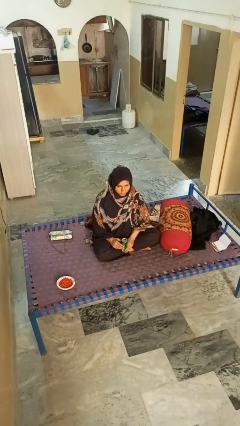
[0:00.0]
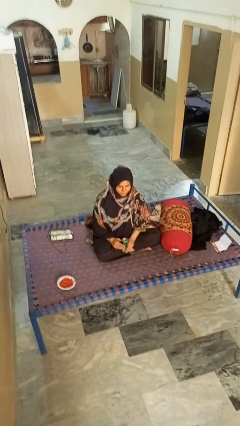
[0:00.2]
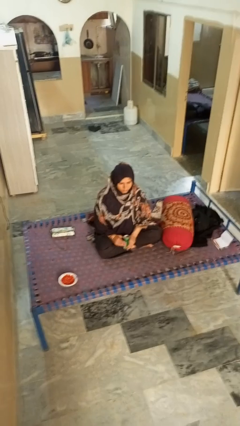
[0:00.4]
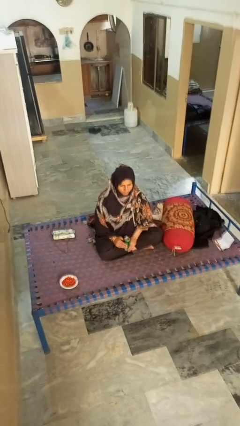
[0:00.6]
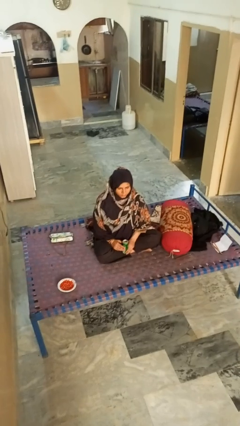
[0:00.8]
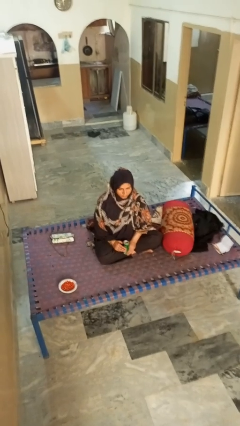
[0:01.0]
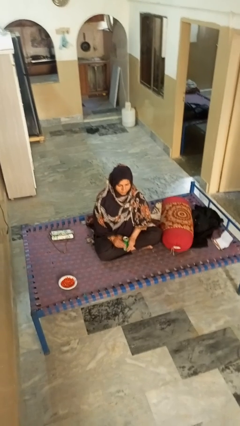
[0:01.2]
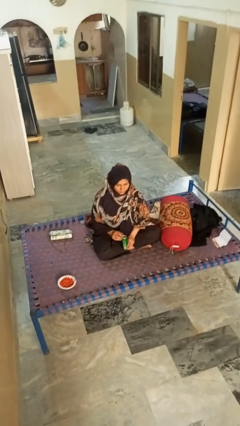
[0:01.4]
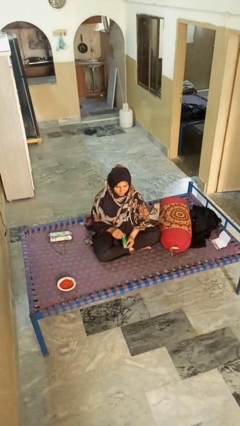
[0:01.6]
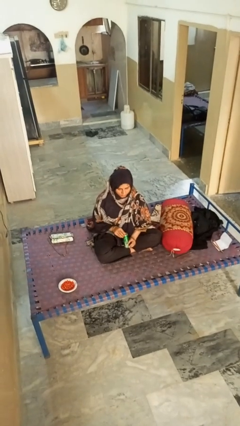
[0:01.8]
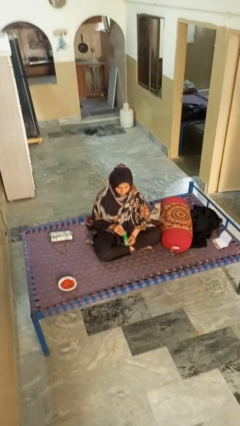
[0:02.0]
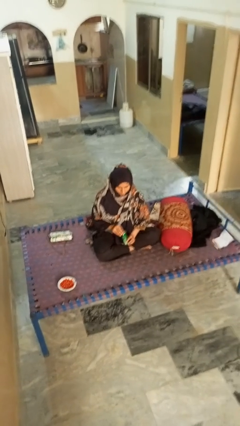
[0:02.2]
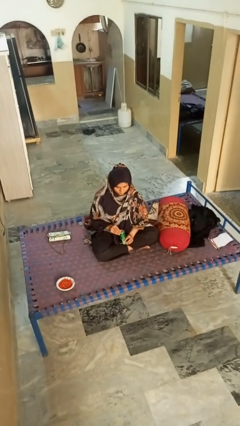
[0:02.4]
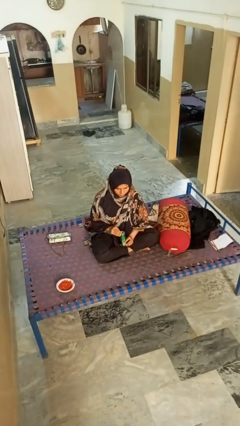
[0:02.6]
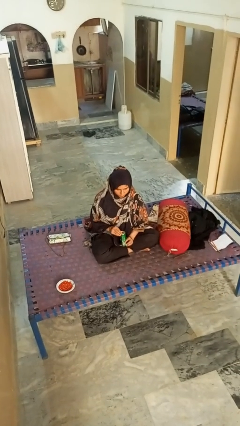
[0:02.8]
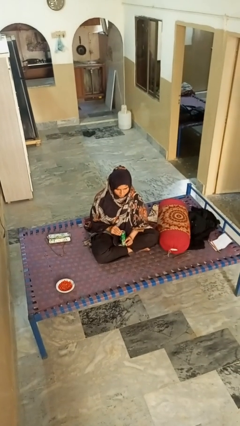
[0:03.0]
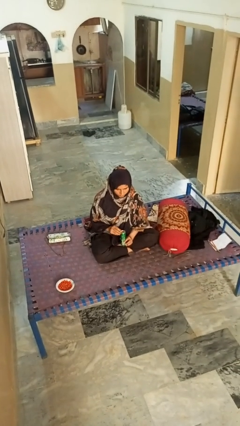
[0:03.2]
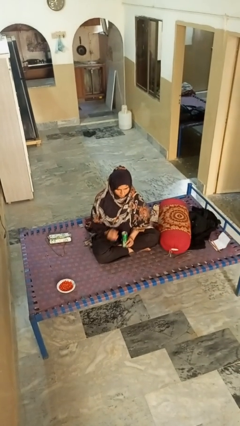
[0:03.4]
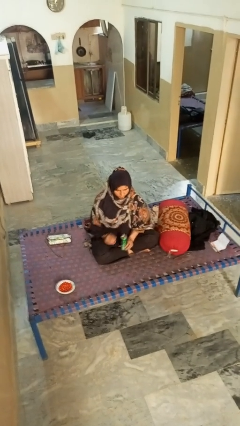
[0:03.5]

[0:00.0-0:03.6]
person opens can with can opener
